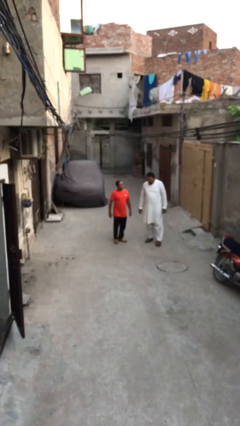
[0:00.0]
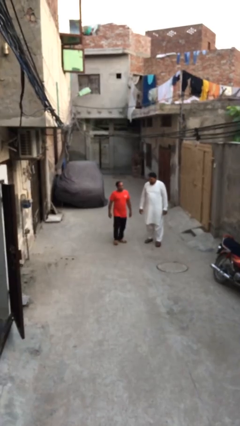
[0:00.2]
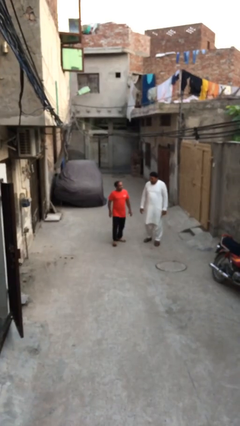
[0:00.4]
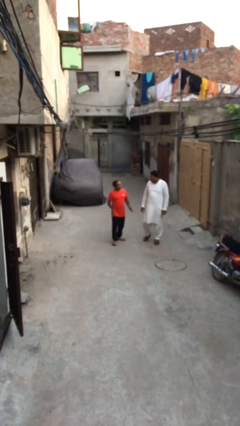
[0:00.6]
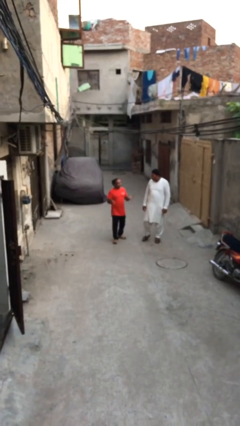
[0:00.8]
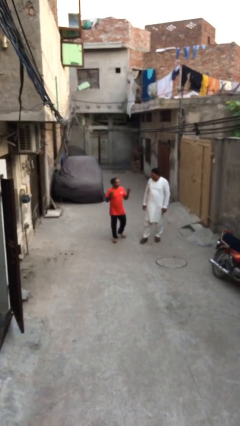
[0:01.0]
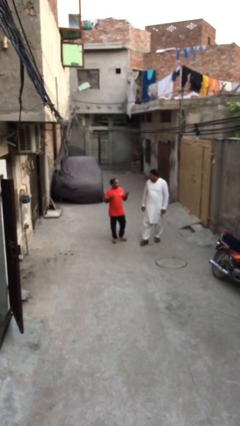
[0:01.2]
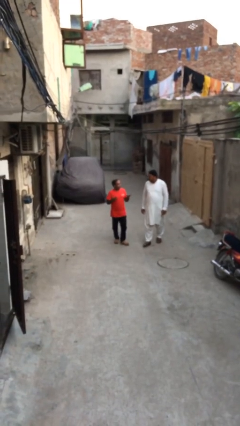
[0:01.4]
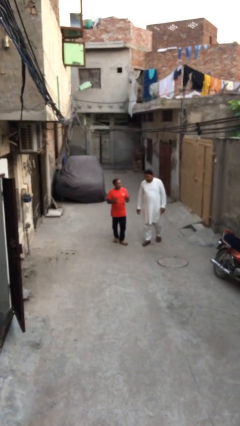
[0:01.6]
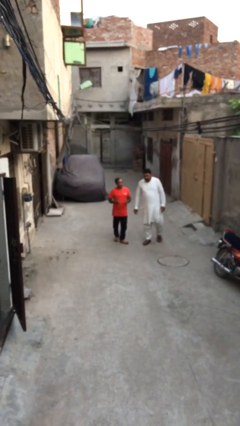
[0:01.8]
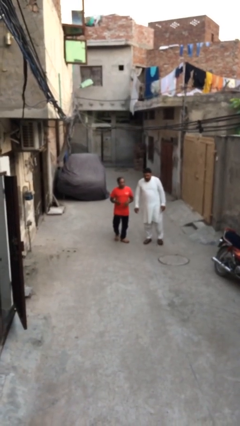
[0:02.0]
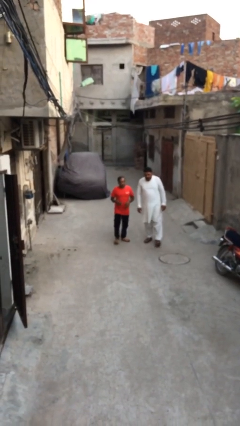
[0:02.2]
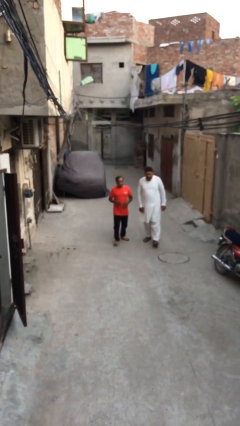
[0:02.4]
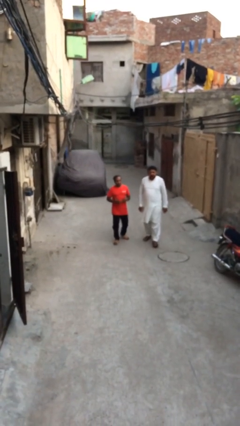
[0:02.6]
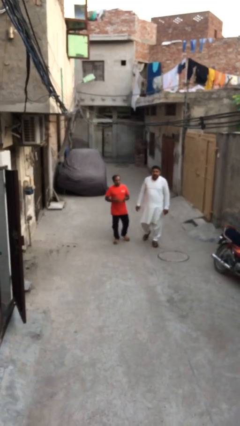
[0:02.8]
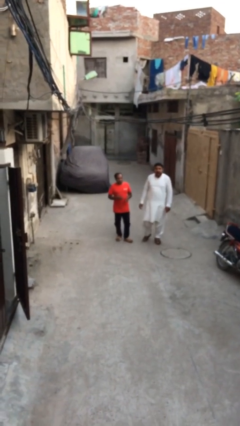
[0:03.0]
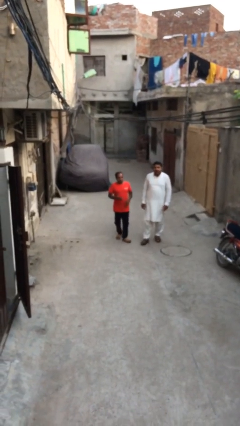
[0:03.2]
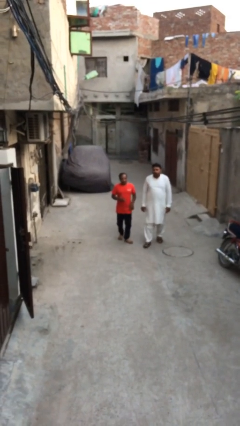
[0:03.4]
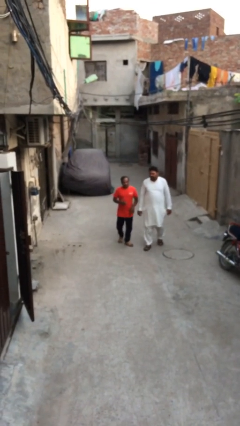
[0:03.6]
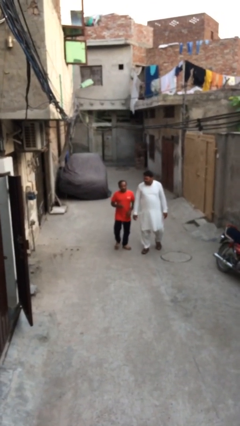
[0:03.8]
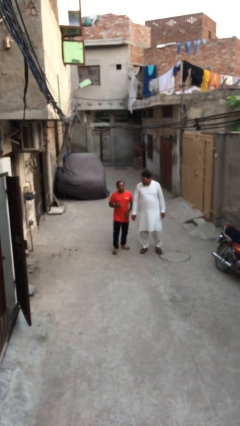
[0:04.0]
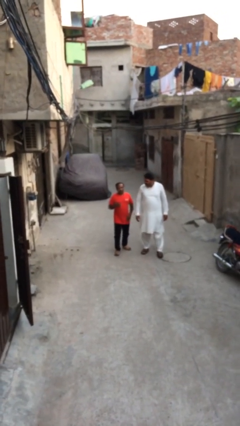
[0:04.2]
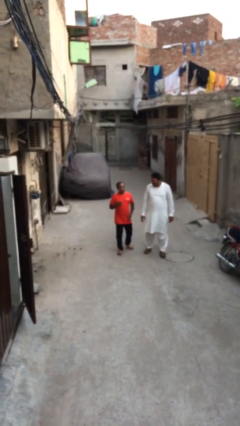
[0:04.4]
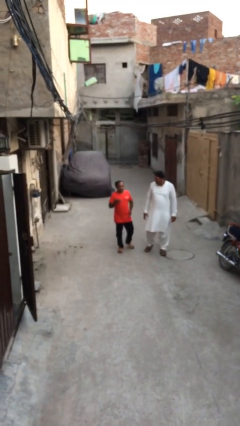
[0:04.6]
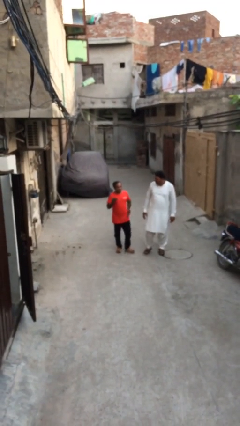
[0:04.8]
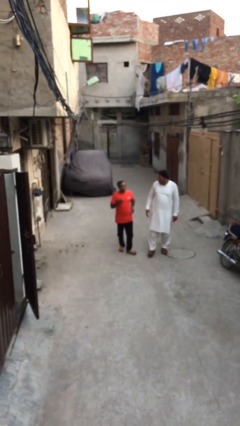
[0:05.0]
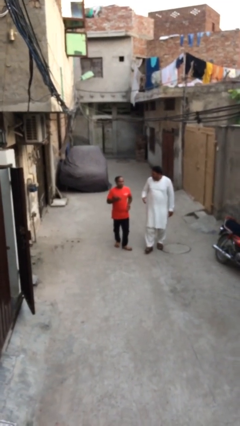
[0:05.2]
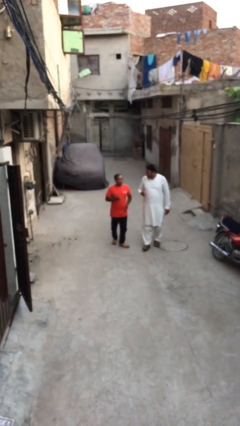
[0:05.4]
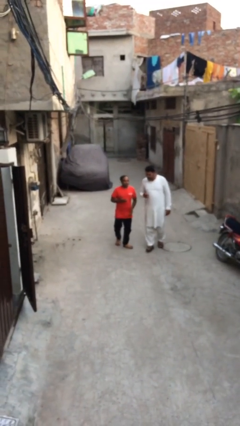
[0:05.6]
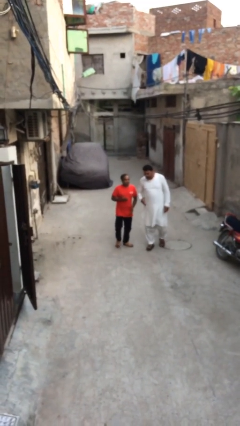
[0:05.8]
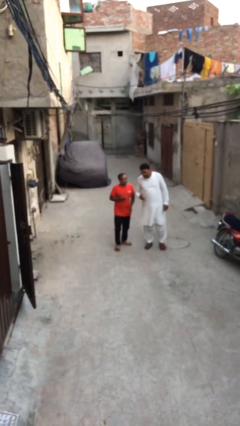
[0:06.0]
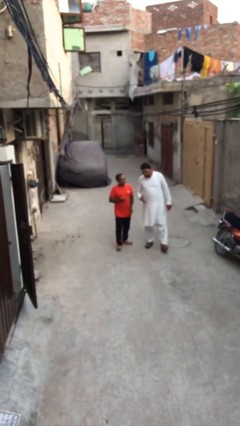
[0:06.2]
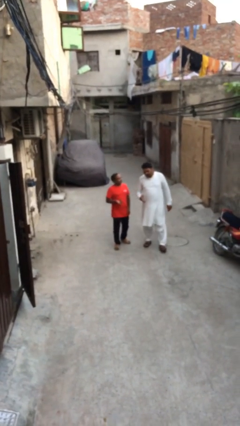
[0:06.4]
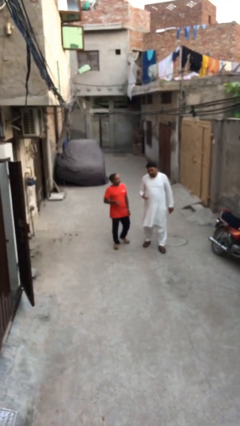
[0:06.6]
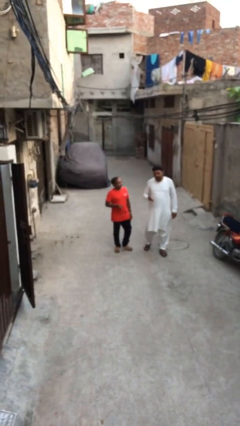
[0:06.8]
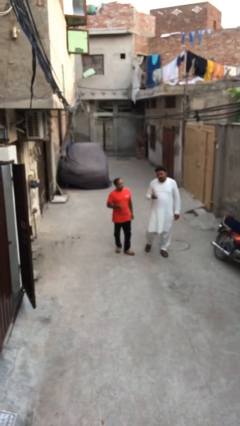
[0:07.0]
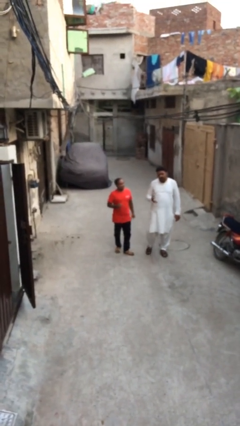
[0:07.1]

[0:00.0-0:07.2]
person talks to person

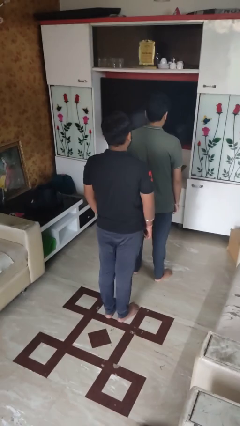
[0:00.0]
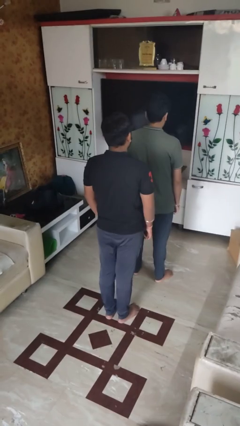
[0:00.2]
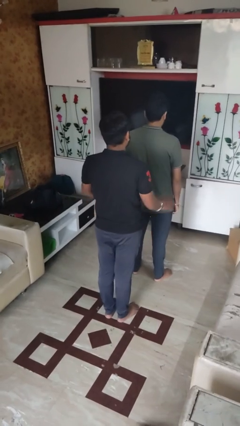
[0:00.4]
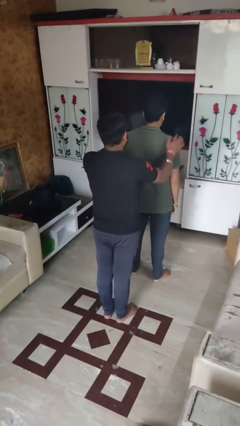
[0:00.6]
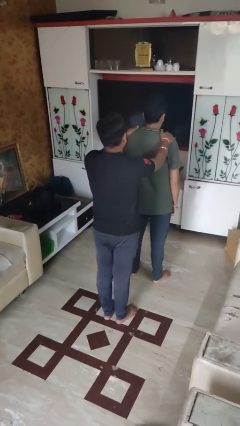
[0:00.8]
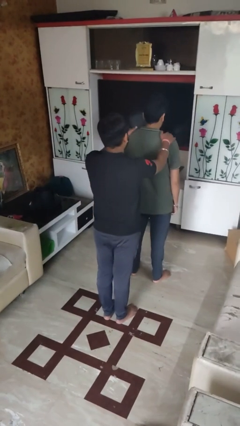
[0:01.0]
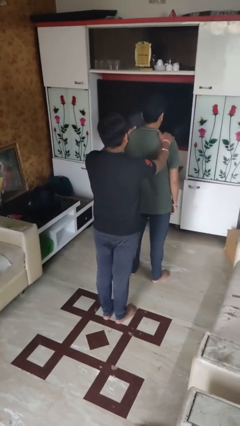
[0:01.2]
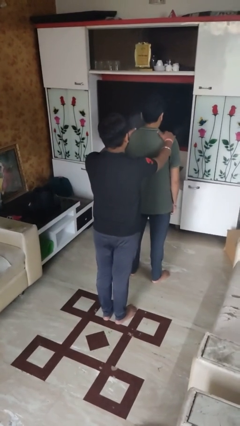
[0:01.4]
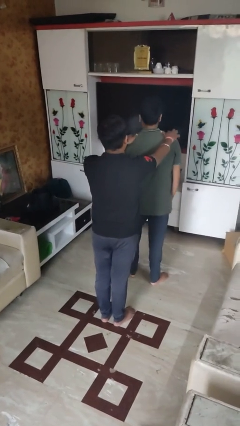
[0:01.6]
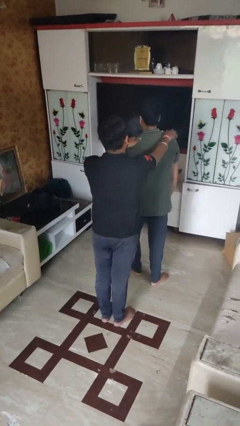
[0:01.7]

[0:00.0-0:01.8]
person grabs person by shoulder

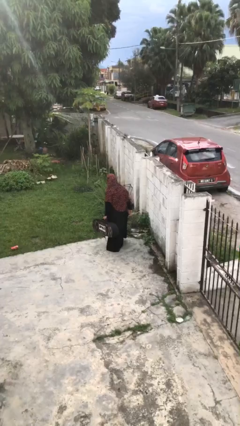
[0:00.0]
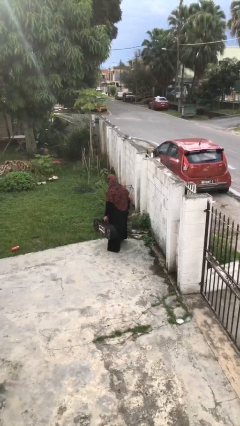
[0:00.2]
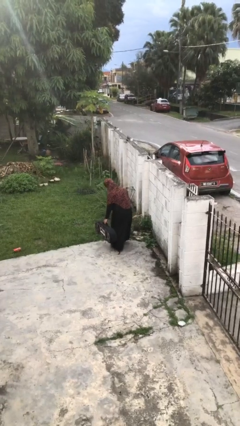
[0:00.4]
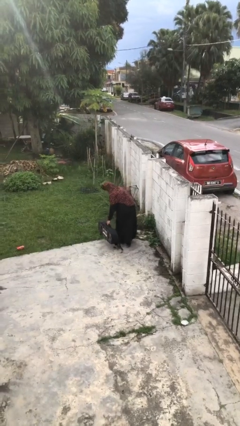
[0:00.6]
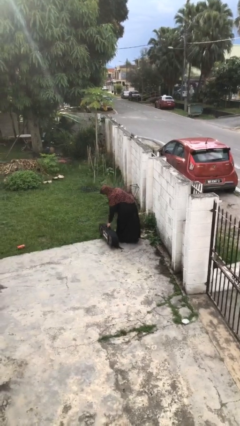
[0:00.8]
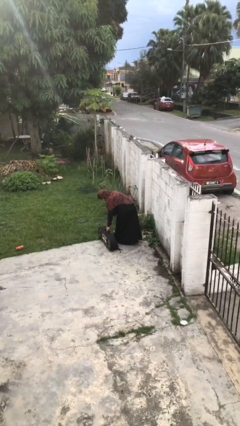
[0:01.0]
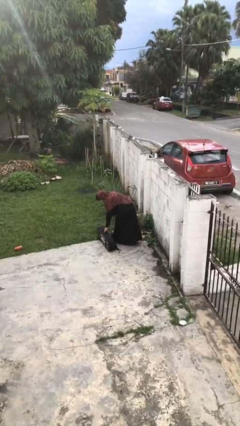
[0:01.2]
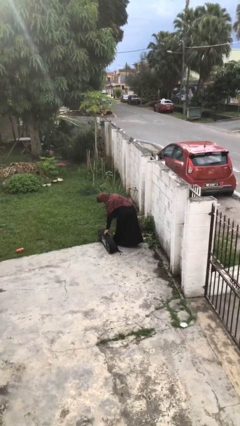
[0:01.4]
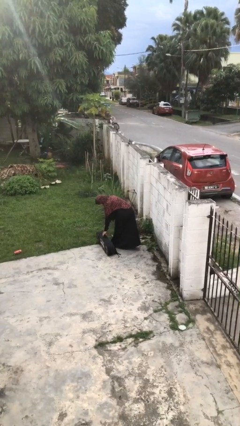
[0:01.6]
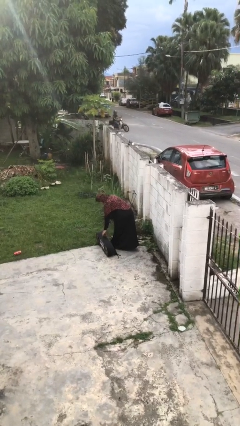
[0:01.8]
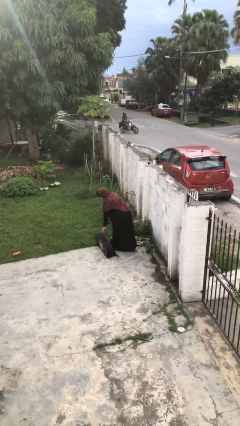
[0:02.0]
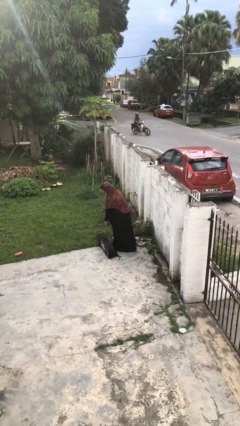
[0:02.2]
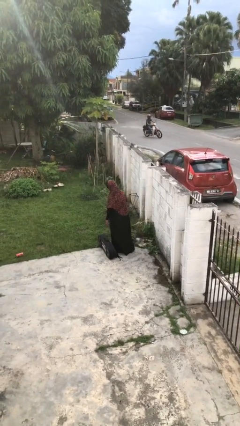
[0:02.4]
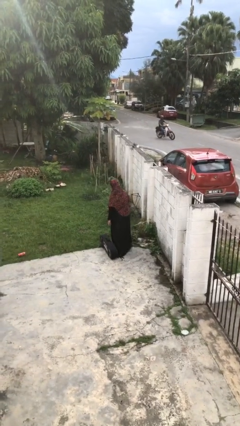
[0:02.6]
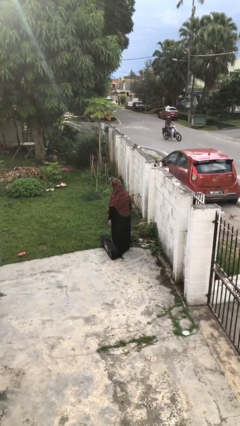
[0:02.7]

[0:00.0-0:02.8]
person puts down object on floor

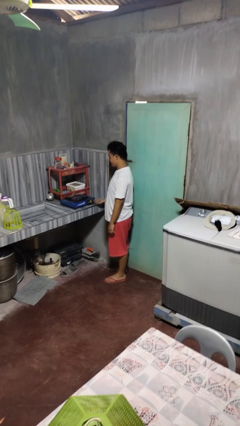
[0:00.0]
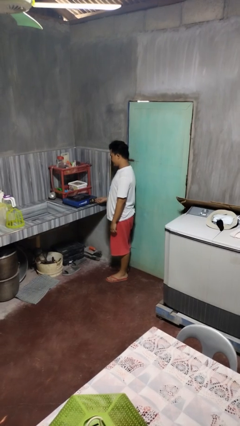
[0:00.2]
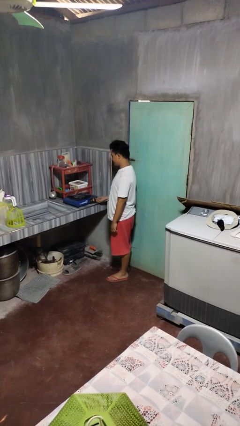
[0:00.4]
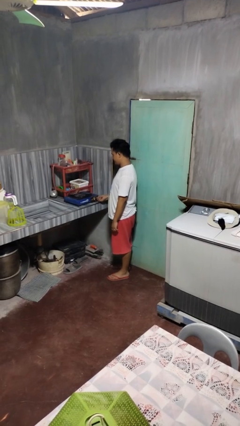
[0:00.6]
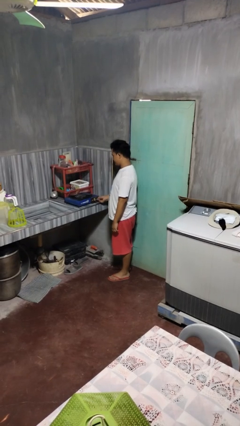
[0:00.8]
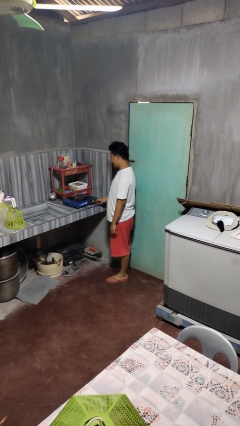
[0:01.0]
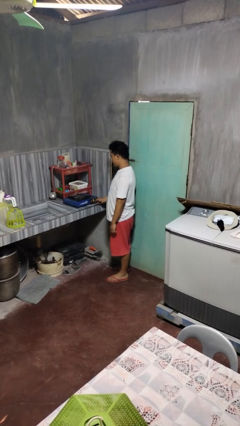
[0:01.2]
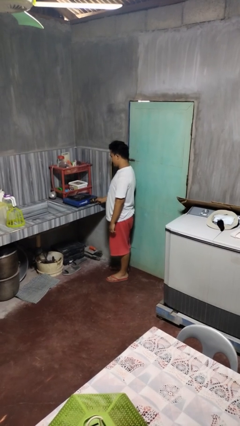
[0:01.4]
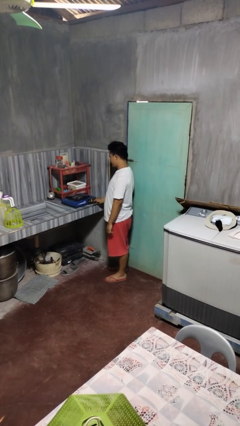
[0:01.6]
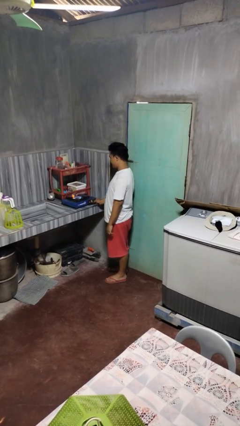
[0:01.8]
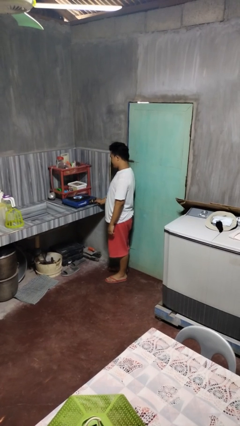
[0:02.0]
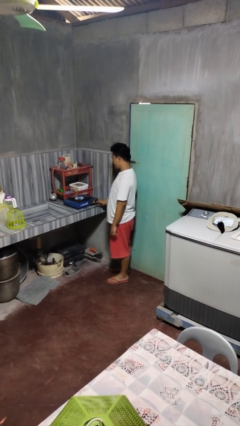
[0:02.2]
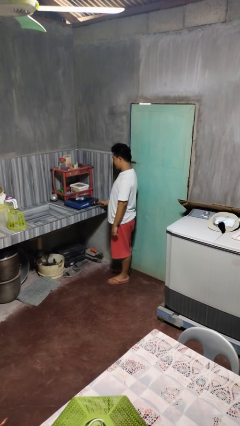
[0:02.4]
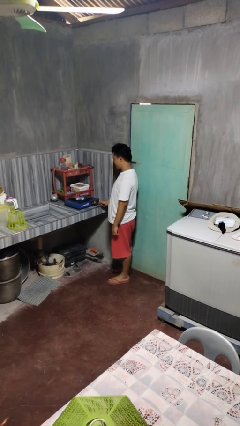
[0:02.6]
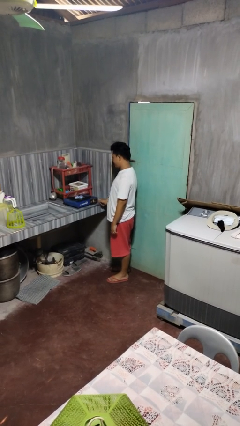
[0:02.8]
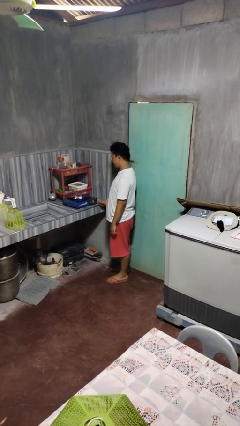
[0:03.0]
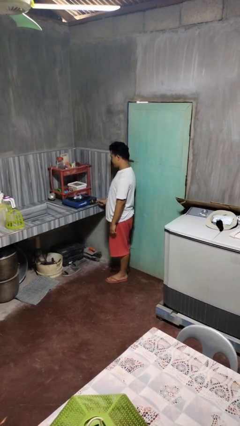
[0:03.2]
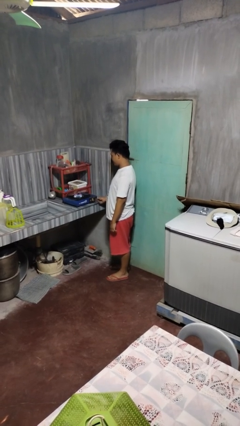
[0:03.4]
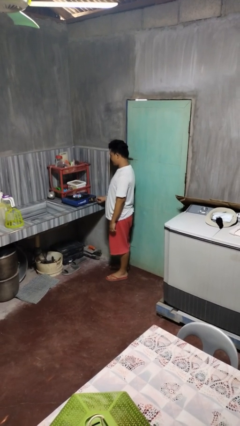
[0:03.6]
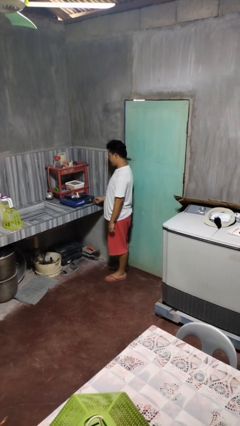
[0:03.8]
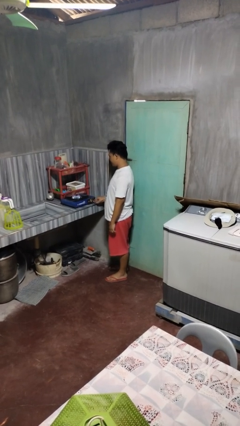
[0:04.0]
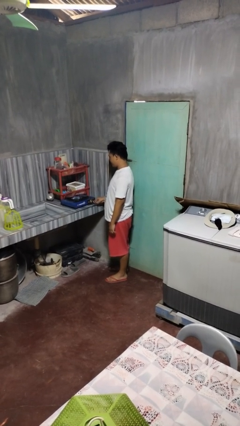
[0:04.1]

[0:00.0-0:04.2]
person turns on stovetop

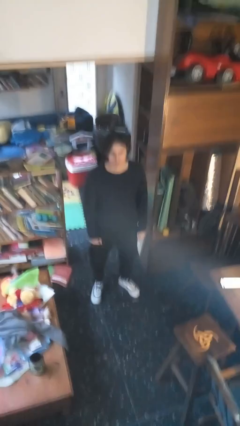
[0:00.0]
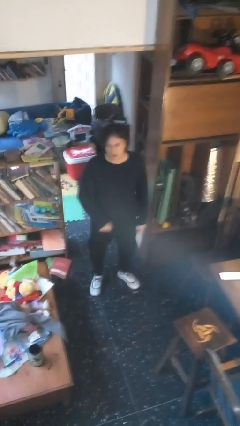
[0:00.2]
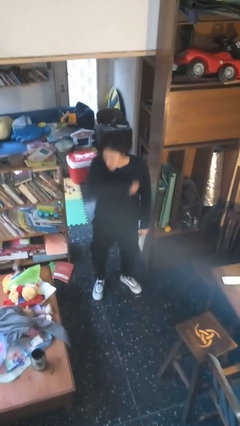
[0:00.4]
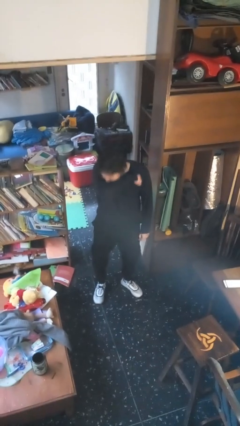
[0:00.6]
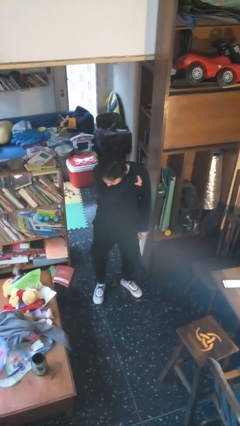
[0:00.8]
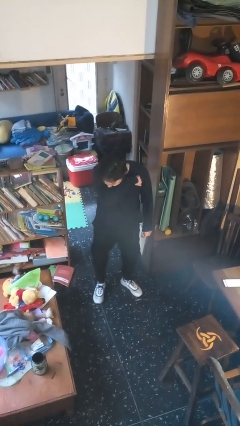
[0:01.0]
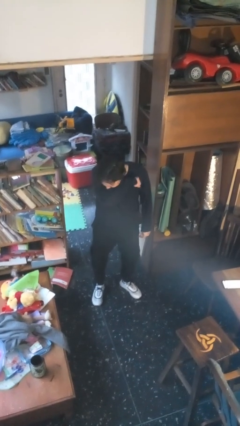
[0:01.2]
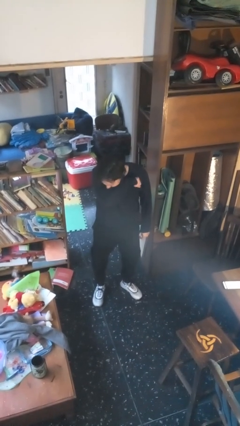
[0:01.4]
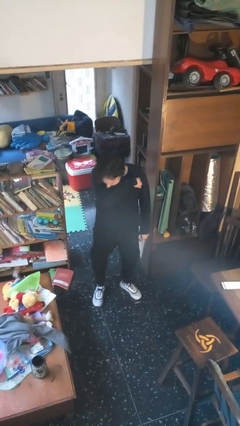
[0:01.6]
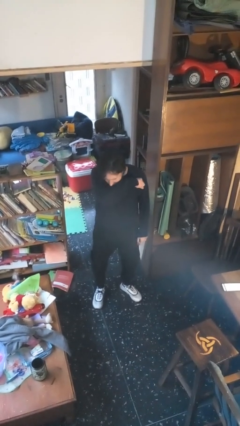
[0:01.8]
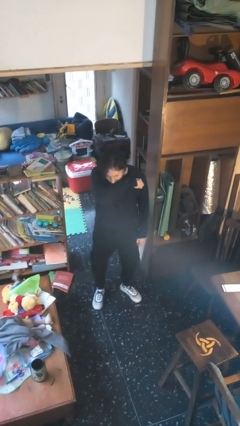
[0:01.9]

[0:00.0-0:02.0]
person sneezes into arm
